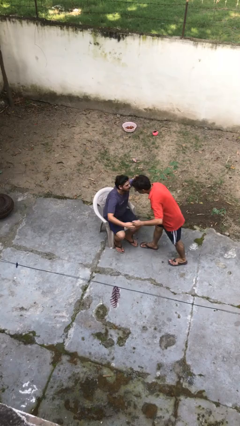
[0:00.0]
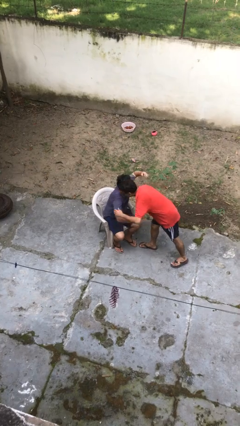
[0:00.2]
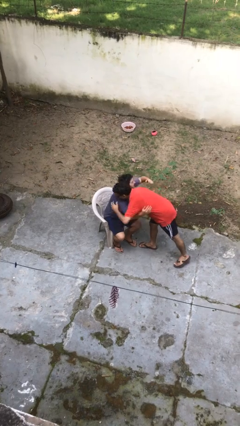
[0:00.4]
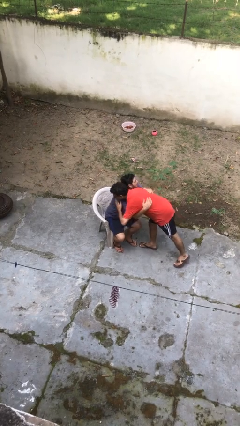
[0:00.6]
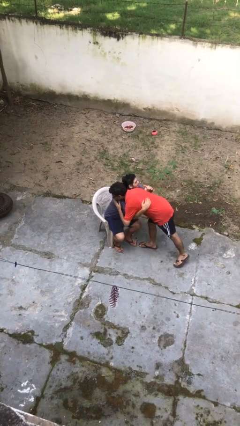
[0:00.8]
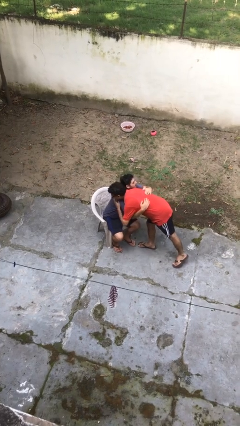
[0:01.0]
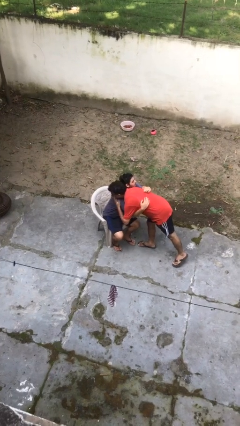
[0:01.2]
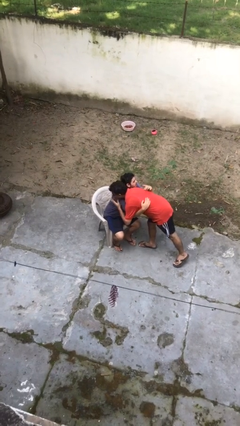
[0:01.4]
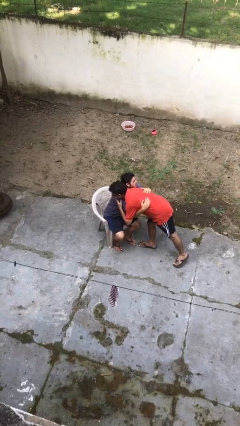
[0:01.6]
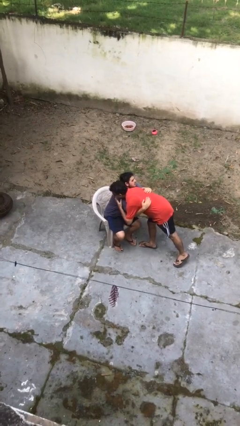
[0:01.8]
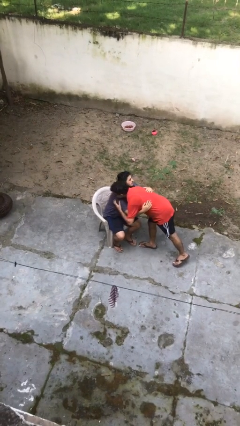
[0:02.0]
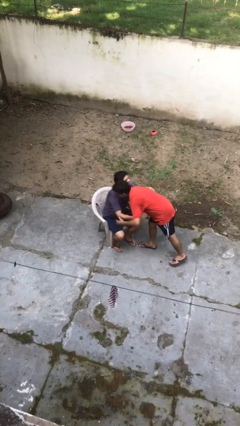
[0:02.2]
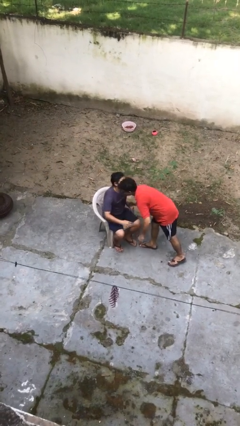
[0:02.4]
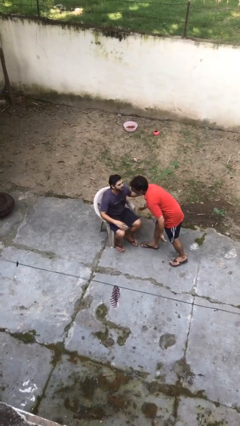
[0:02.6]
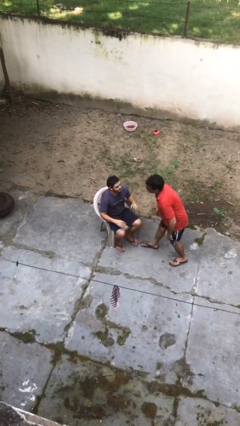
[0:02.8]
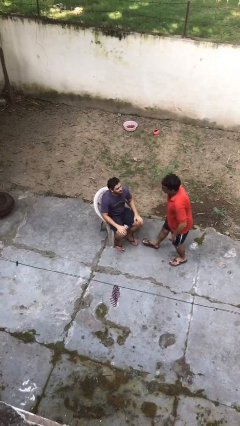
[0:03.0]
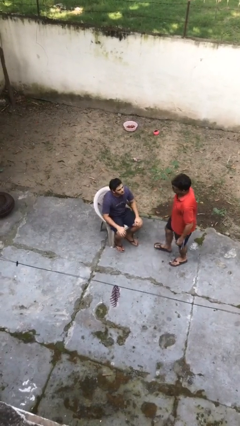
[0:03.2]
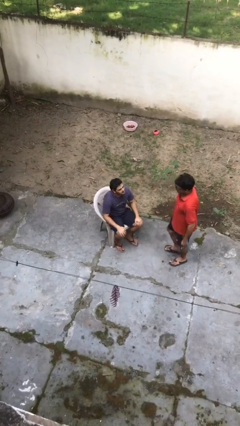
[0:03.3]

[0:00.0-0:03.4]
person embraces person

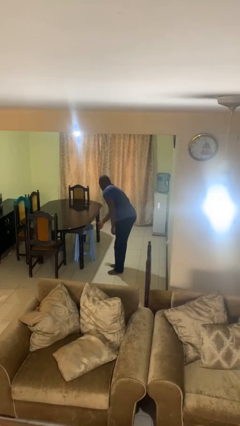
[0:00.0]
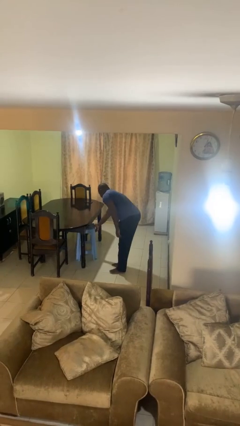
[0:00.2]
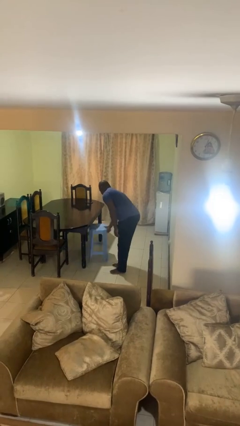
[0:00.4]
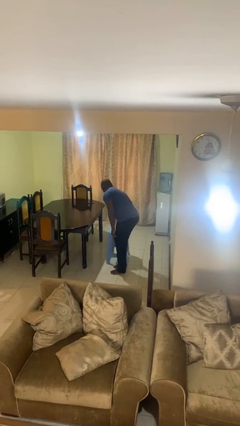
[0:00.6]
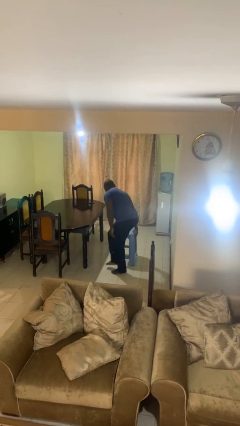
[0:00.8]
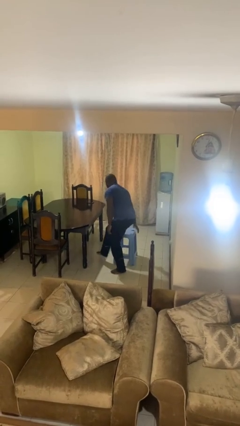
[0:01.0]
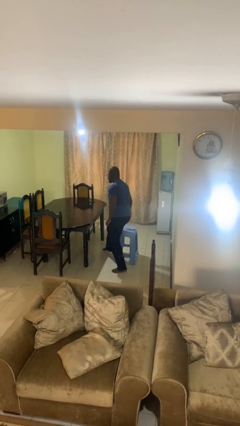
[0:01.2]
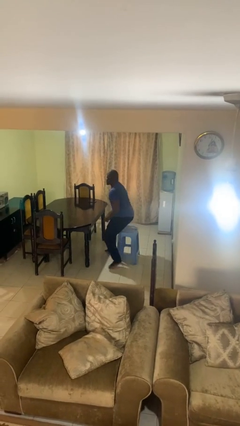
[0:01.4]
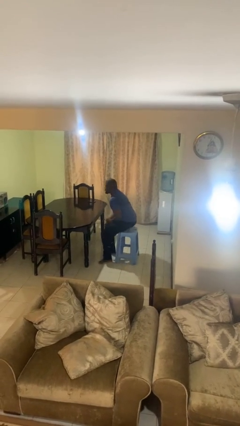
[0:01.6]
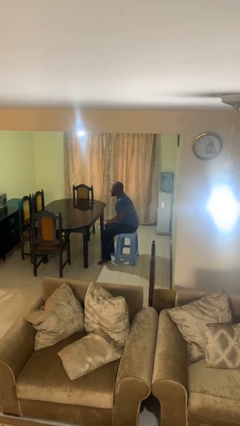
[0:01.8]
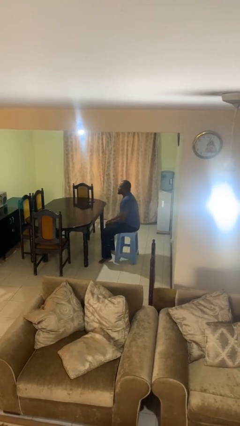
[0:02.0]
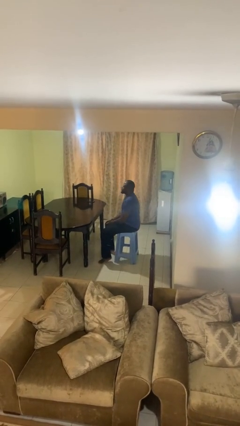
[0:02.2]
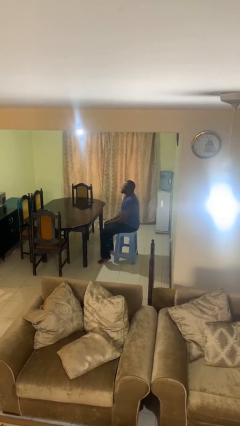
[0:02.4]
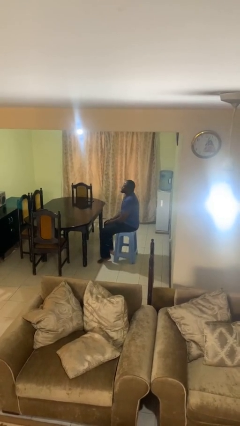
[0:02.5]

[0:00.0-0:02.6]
person sits down

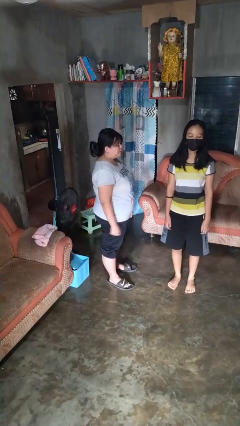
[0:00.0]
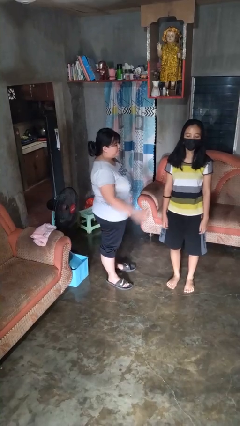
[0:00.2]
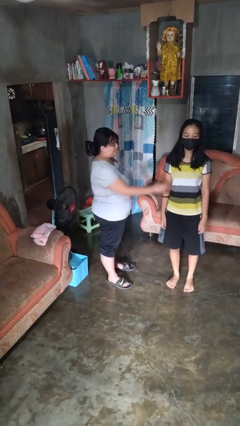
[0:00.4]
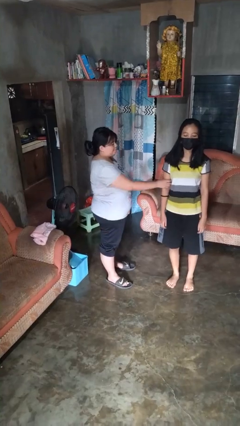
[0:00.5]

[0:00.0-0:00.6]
person grabs person by bicep

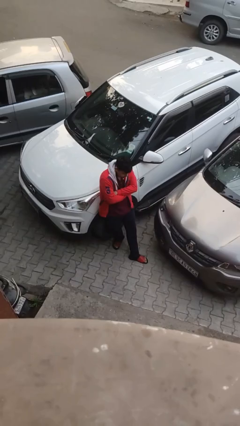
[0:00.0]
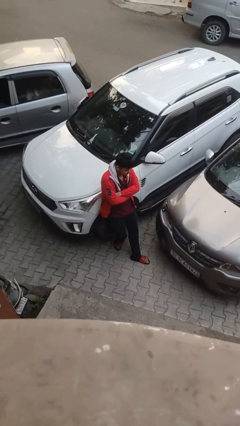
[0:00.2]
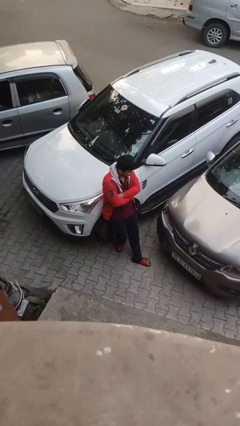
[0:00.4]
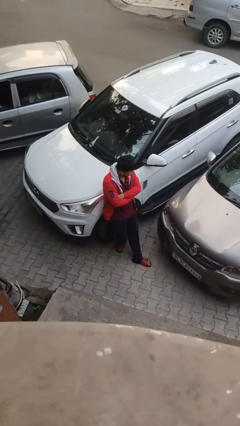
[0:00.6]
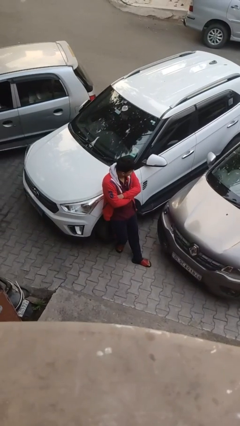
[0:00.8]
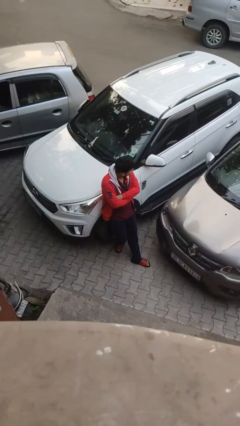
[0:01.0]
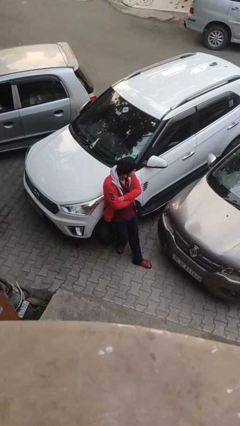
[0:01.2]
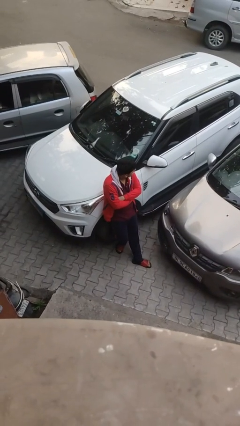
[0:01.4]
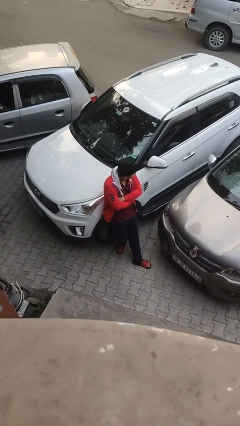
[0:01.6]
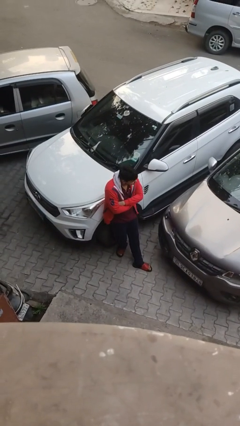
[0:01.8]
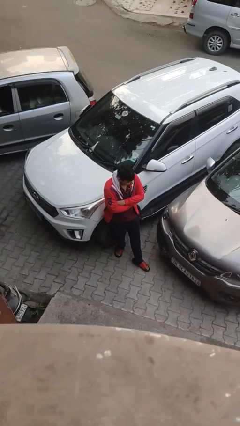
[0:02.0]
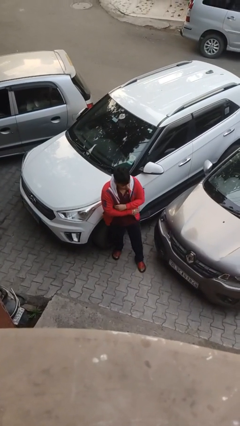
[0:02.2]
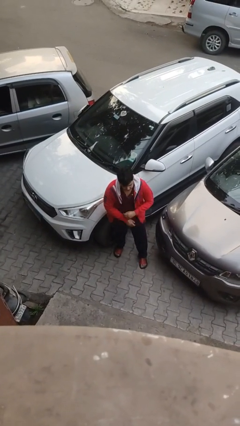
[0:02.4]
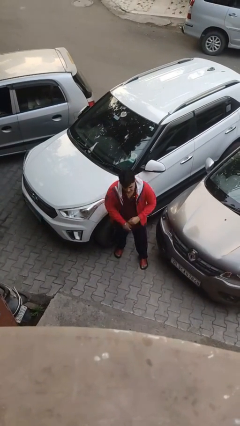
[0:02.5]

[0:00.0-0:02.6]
person leans against car

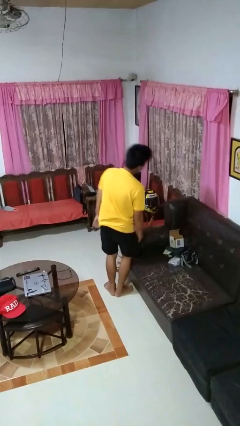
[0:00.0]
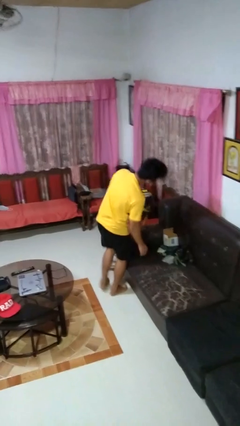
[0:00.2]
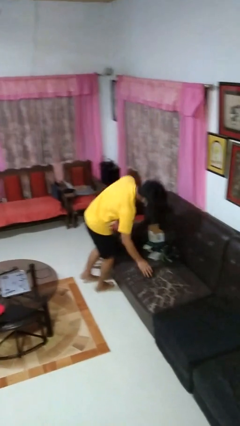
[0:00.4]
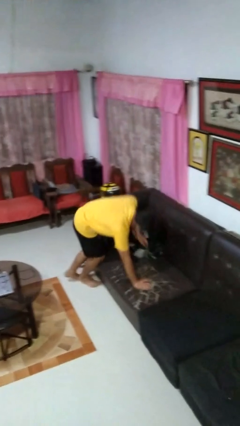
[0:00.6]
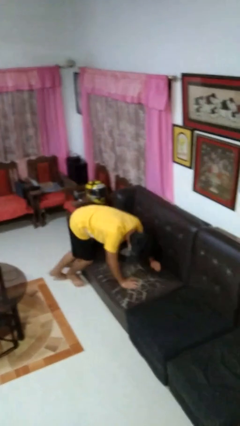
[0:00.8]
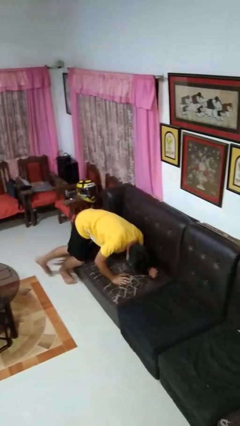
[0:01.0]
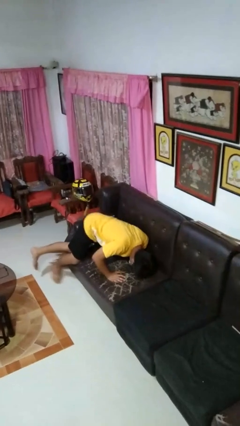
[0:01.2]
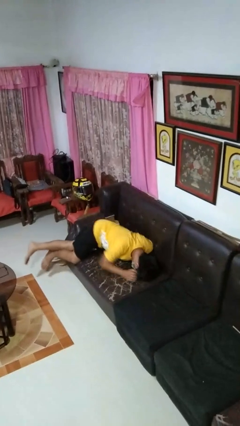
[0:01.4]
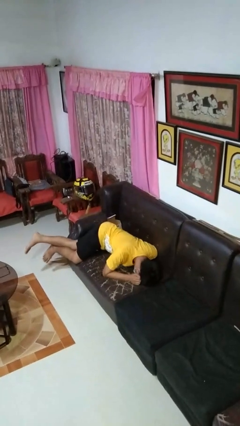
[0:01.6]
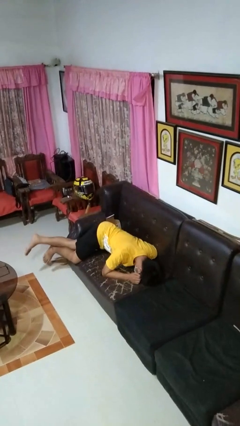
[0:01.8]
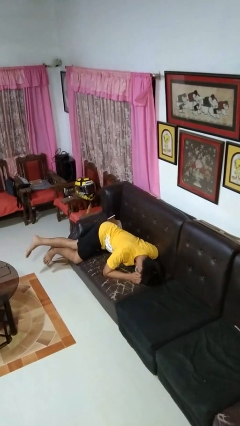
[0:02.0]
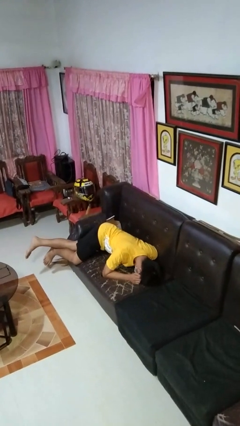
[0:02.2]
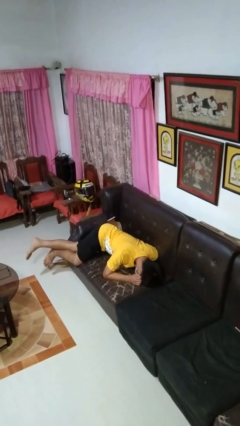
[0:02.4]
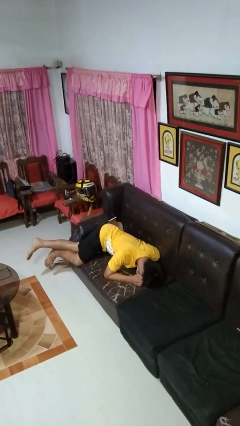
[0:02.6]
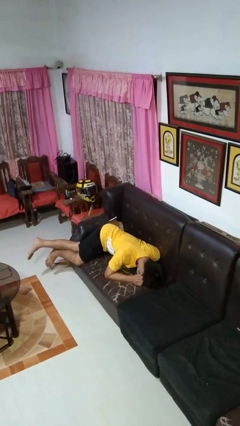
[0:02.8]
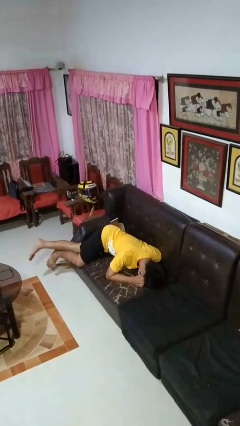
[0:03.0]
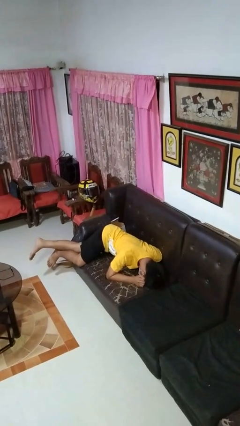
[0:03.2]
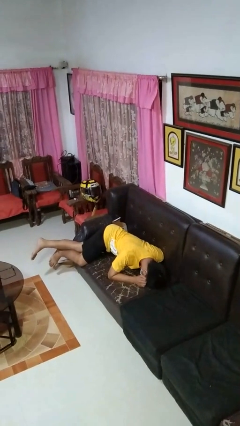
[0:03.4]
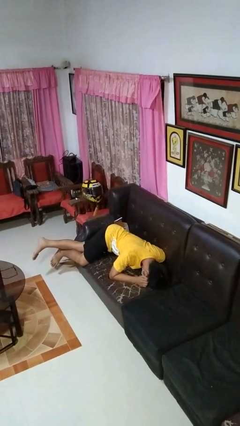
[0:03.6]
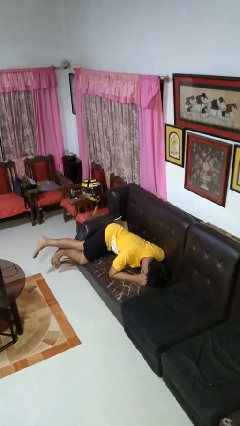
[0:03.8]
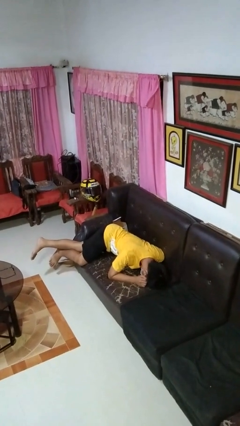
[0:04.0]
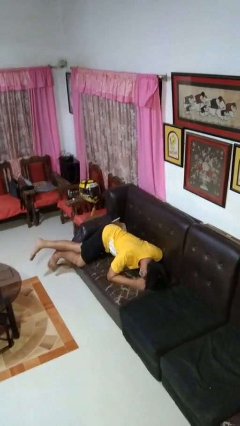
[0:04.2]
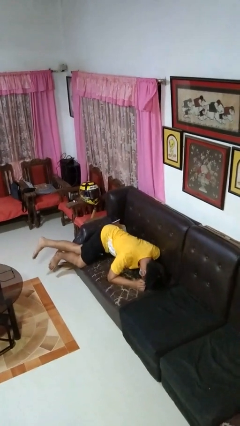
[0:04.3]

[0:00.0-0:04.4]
person lies down on couch

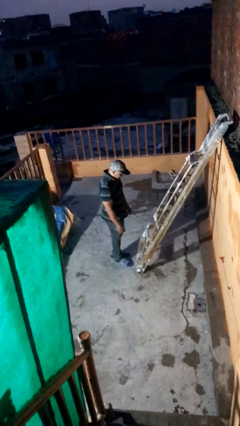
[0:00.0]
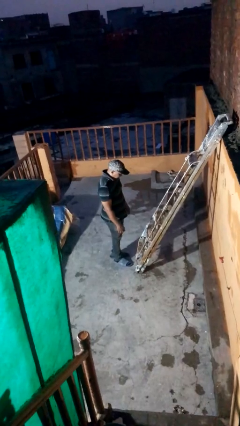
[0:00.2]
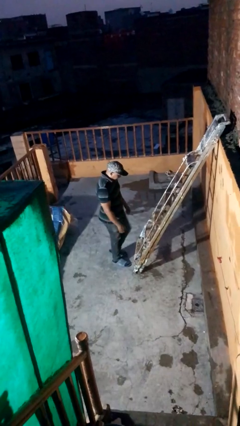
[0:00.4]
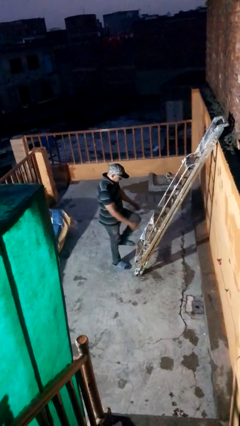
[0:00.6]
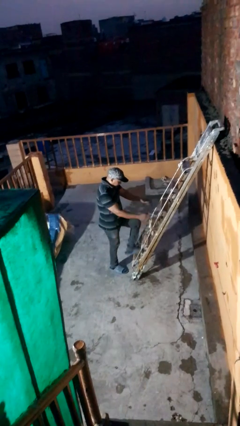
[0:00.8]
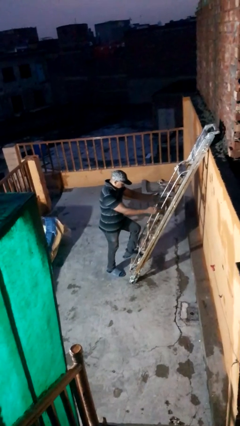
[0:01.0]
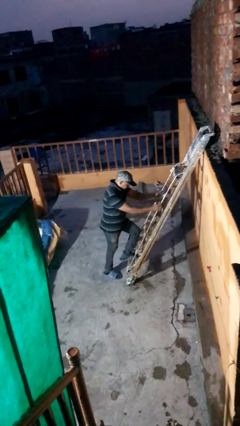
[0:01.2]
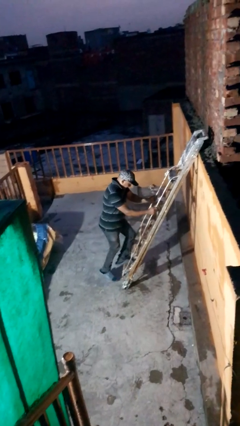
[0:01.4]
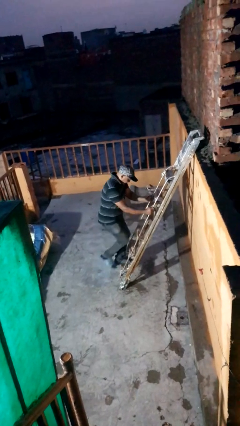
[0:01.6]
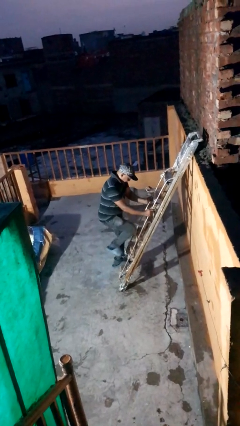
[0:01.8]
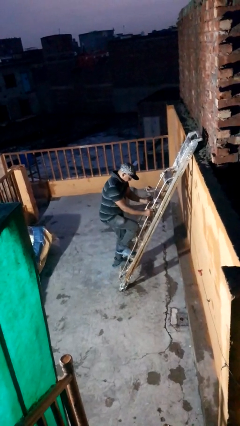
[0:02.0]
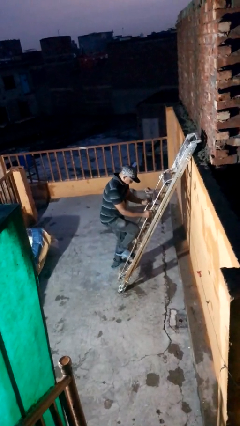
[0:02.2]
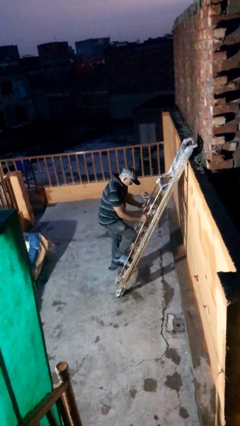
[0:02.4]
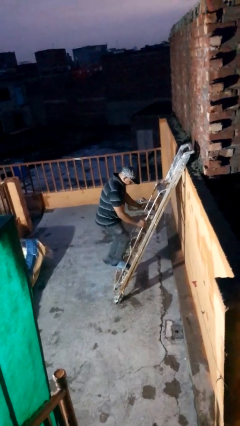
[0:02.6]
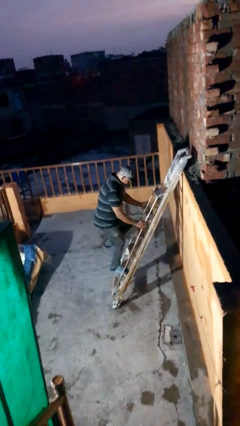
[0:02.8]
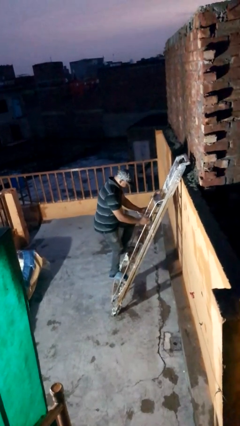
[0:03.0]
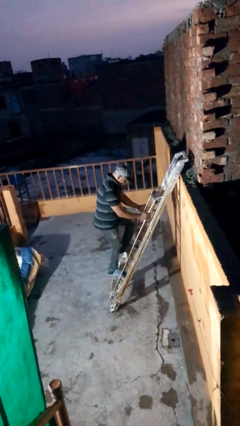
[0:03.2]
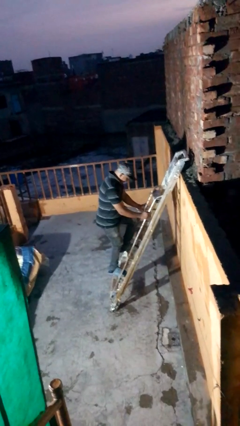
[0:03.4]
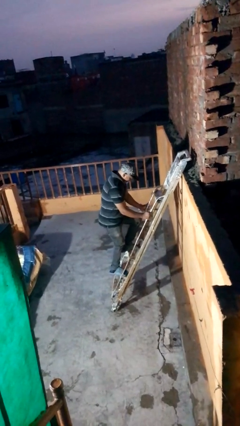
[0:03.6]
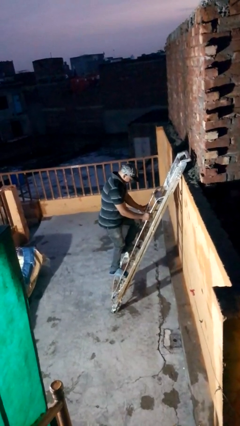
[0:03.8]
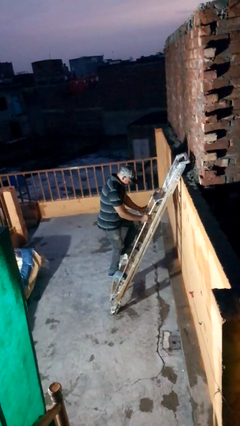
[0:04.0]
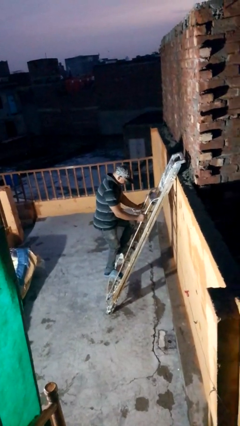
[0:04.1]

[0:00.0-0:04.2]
person climbs up ladder
